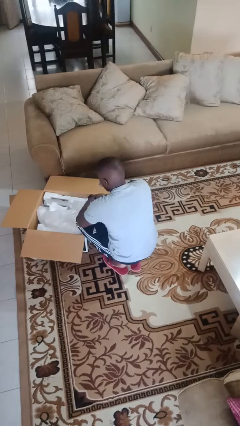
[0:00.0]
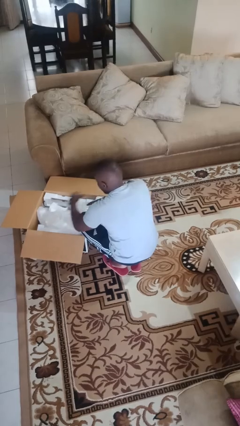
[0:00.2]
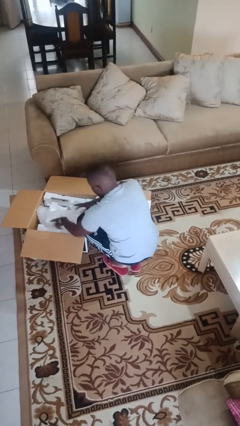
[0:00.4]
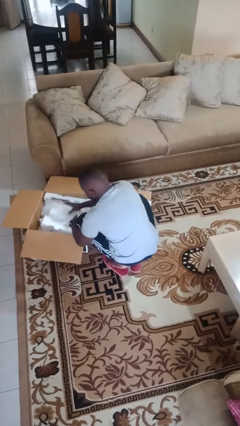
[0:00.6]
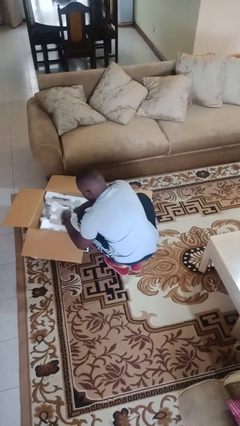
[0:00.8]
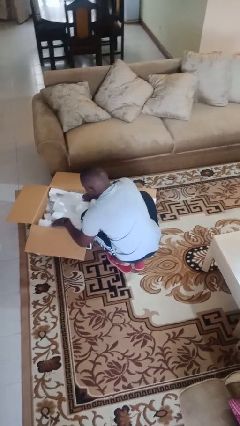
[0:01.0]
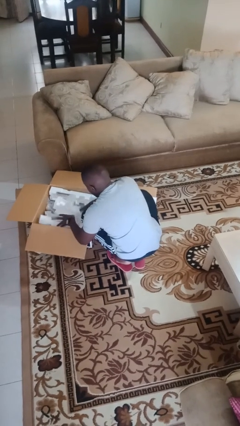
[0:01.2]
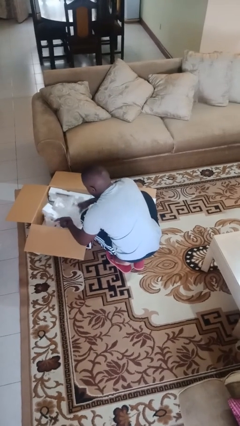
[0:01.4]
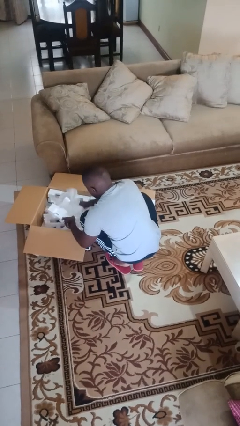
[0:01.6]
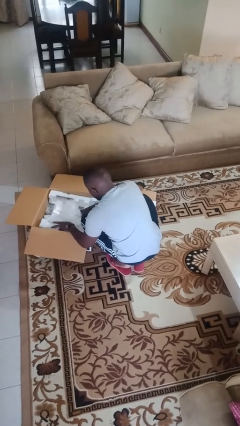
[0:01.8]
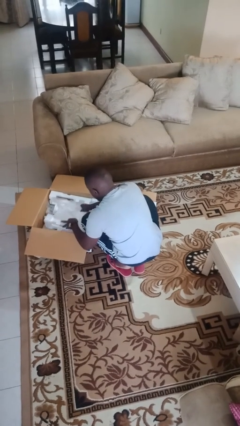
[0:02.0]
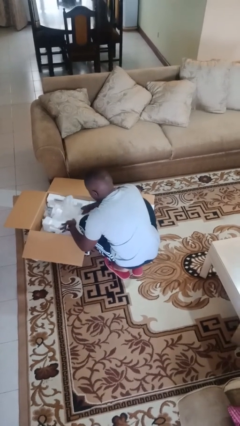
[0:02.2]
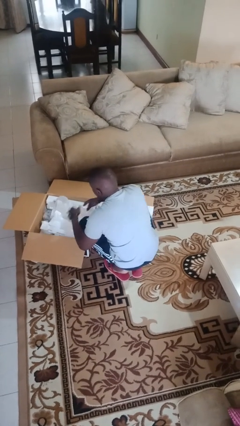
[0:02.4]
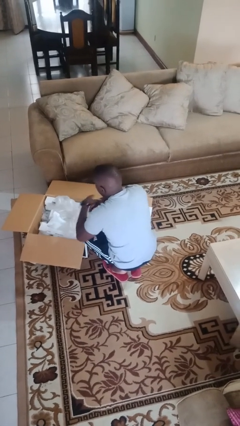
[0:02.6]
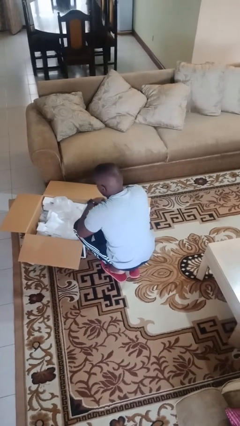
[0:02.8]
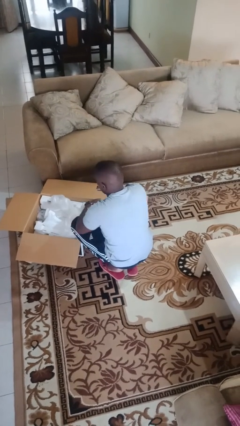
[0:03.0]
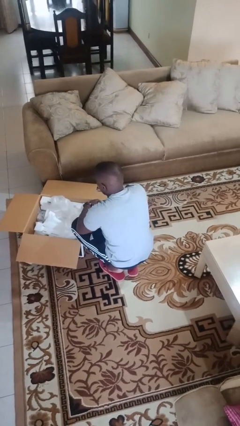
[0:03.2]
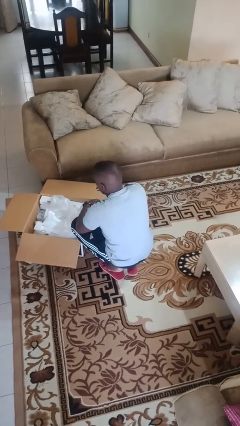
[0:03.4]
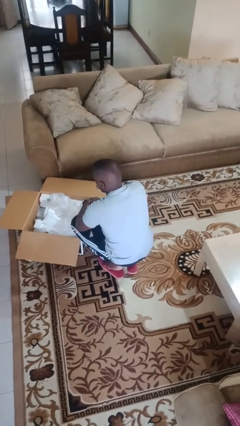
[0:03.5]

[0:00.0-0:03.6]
person searches in box

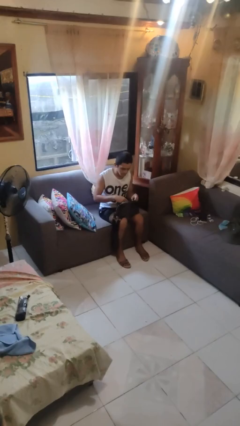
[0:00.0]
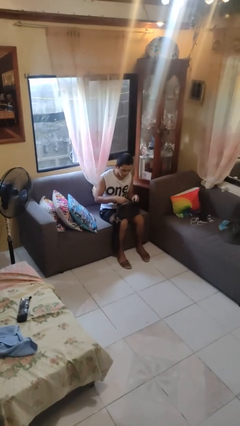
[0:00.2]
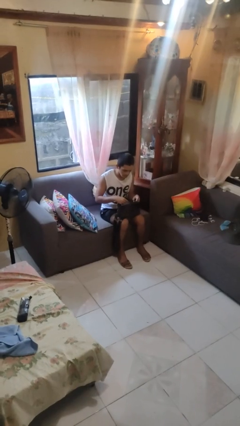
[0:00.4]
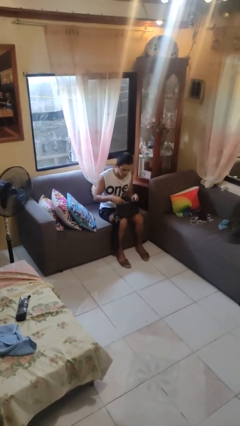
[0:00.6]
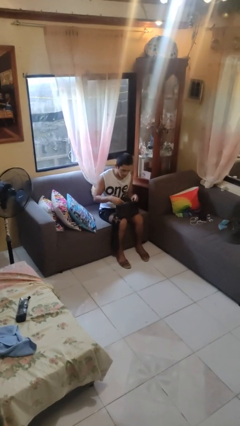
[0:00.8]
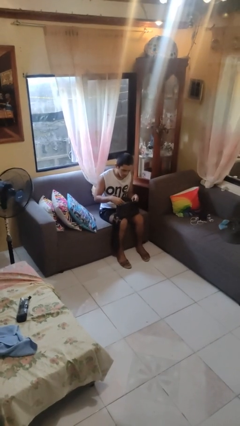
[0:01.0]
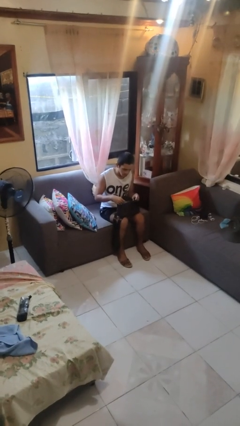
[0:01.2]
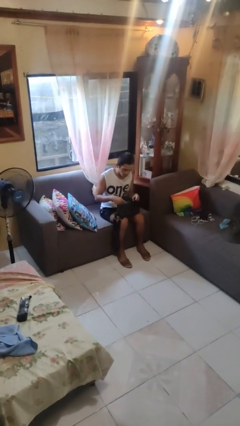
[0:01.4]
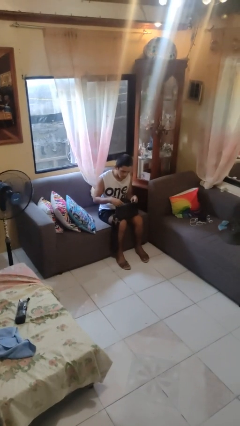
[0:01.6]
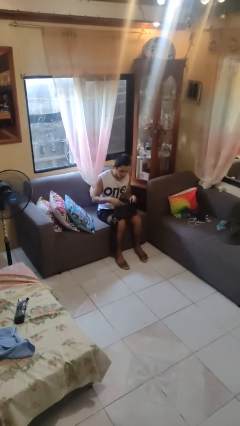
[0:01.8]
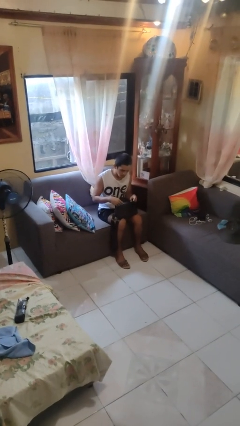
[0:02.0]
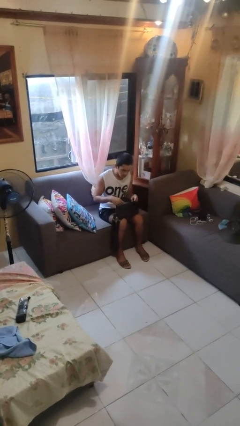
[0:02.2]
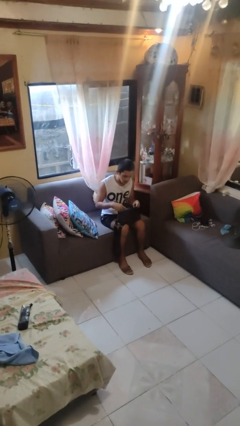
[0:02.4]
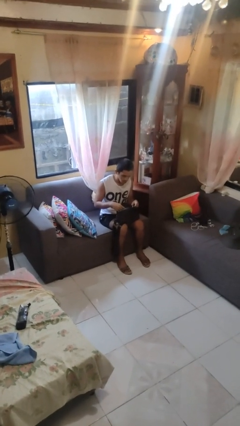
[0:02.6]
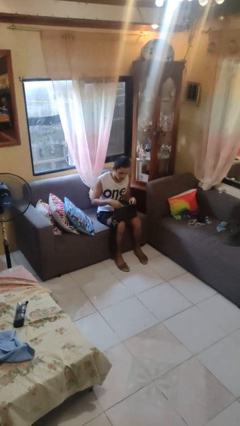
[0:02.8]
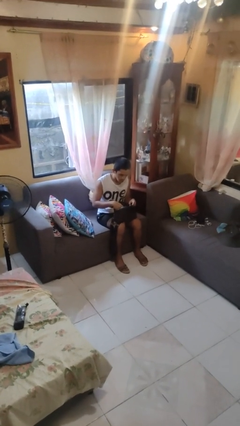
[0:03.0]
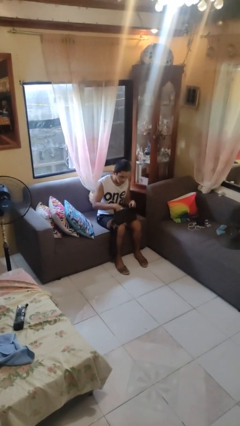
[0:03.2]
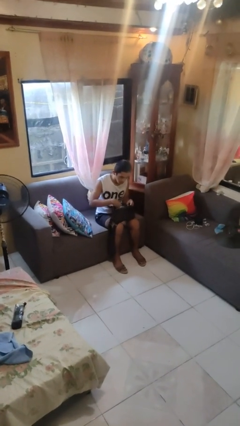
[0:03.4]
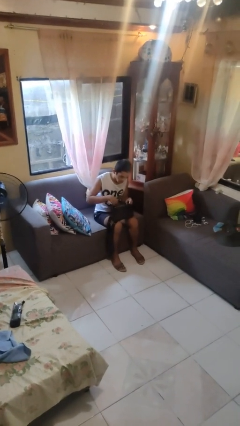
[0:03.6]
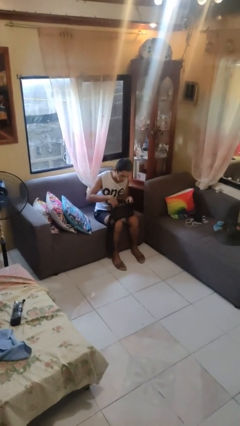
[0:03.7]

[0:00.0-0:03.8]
person puts object into purse

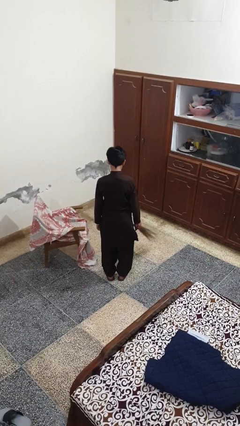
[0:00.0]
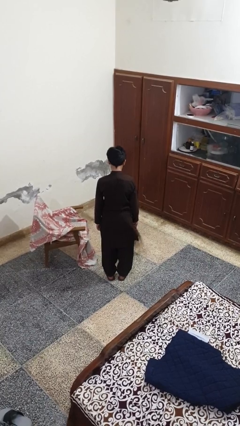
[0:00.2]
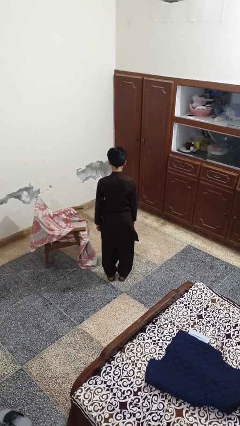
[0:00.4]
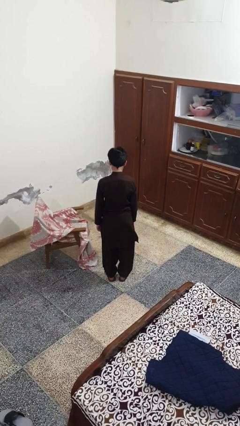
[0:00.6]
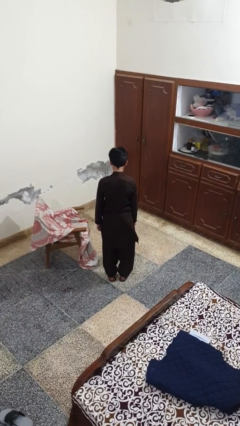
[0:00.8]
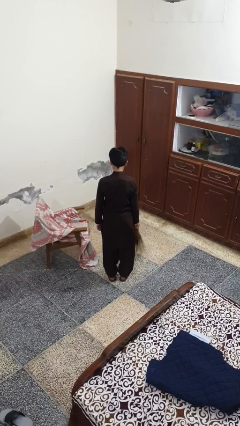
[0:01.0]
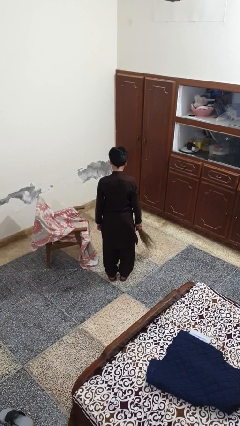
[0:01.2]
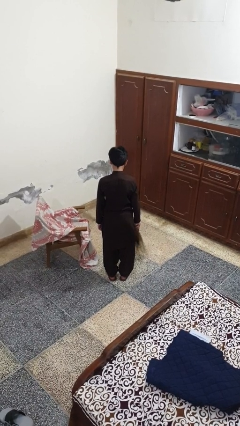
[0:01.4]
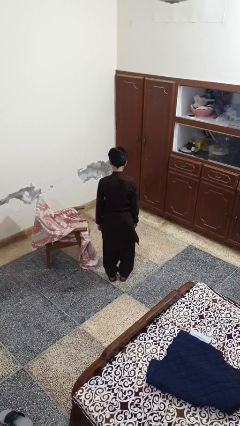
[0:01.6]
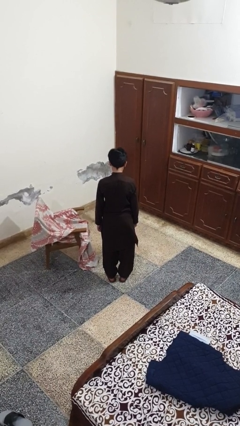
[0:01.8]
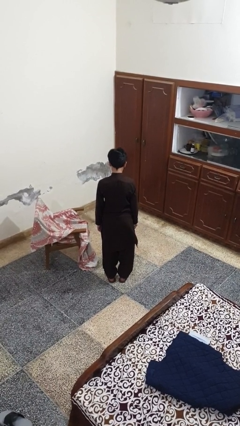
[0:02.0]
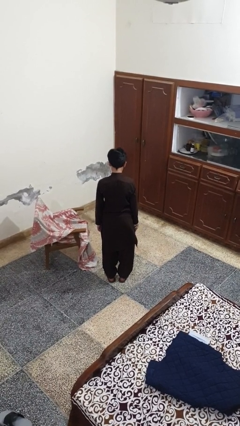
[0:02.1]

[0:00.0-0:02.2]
person sweeps floor

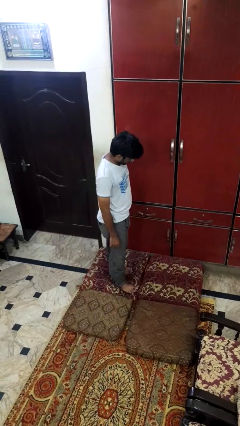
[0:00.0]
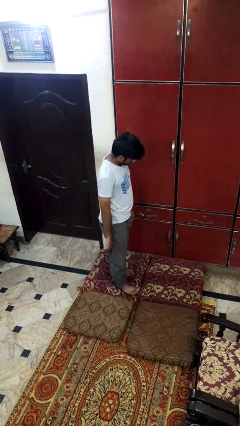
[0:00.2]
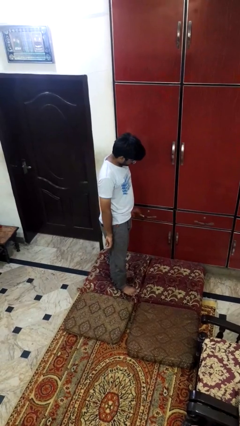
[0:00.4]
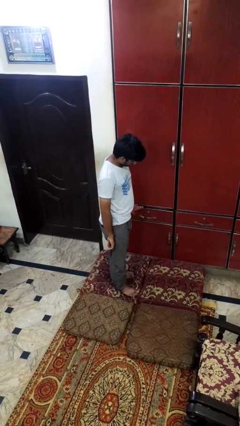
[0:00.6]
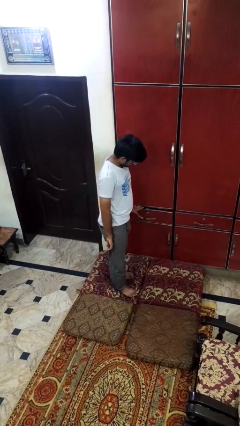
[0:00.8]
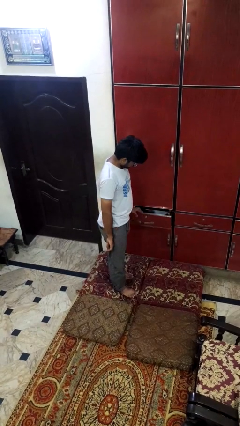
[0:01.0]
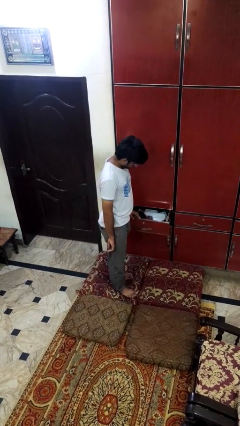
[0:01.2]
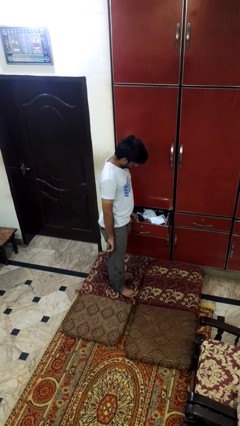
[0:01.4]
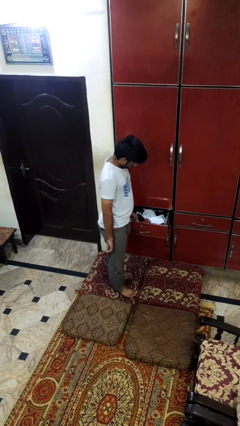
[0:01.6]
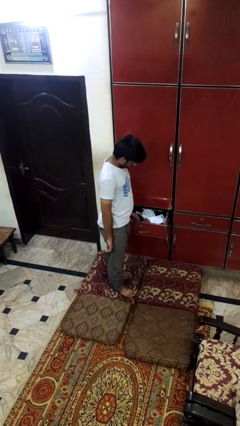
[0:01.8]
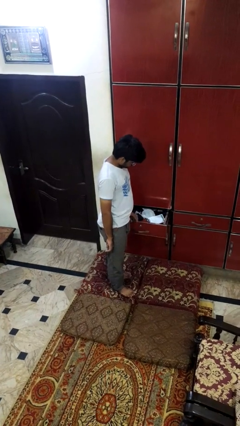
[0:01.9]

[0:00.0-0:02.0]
person opens dresser drawer

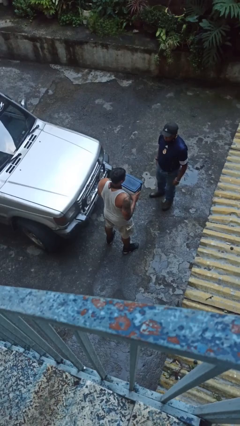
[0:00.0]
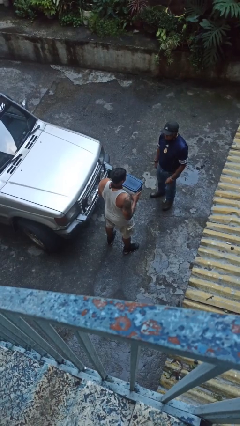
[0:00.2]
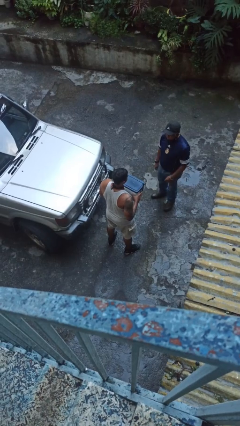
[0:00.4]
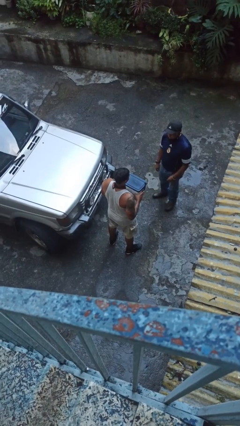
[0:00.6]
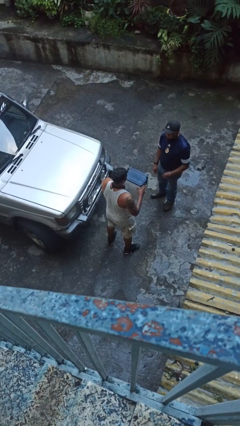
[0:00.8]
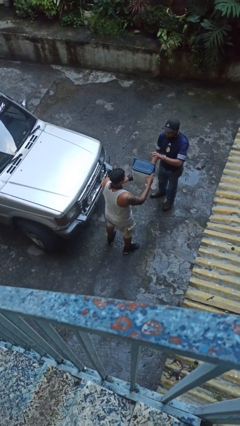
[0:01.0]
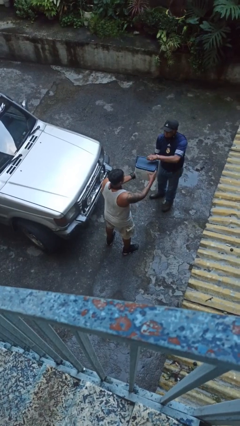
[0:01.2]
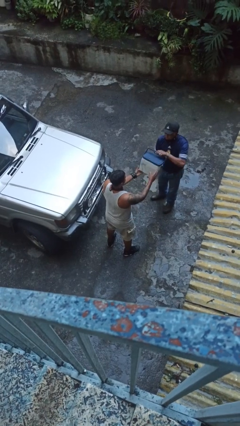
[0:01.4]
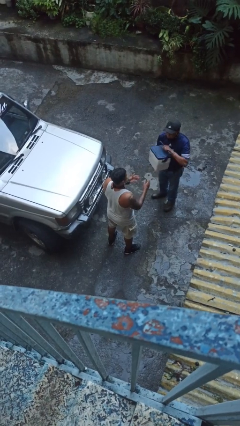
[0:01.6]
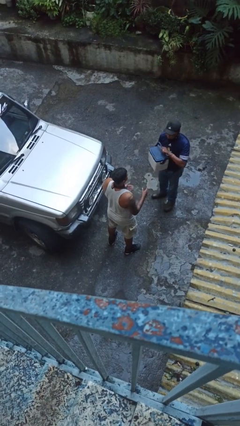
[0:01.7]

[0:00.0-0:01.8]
person transfers object to person

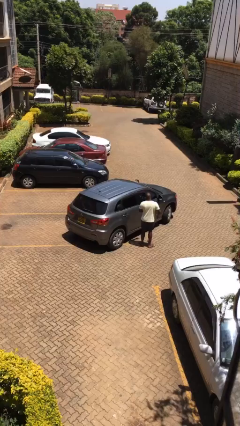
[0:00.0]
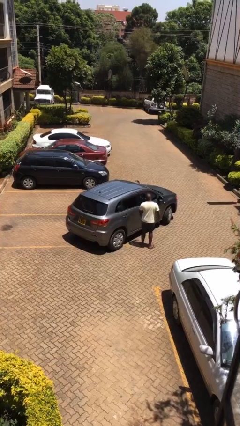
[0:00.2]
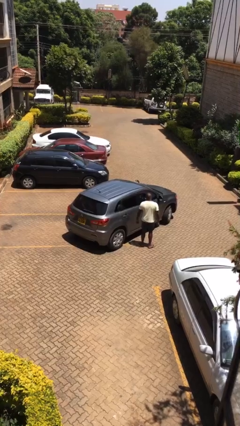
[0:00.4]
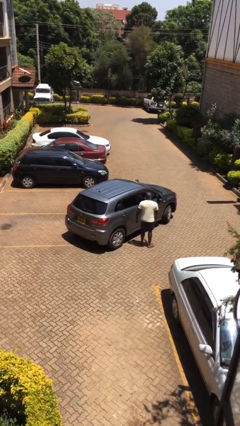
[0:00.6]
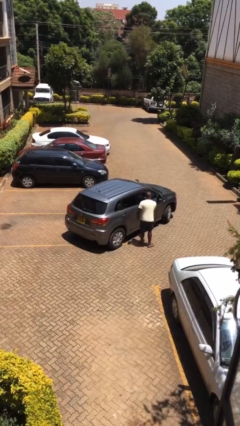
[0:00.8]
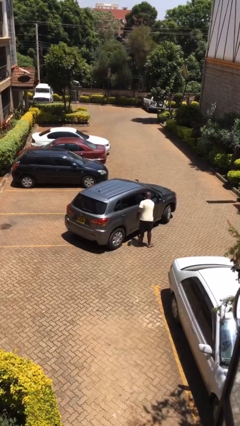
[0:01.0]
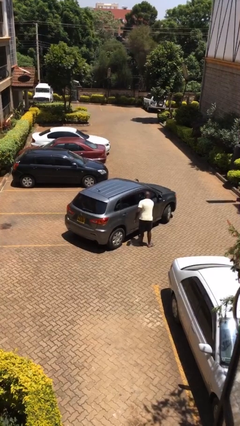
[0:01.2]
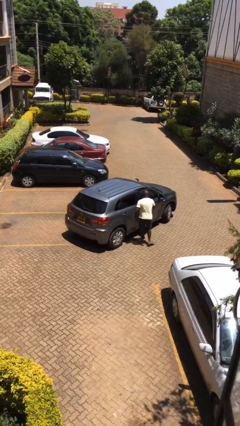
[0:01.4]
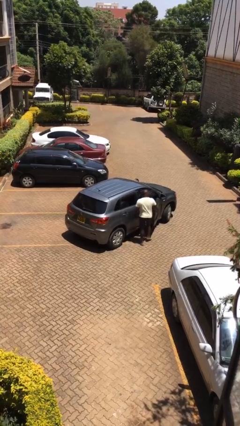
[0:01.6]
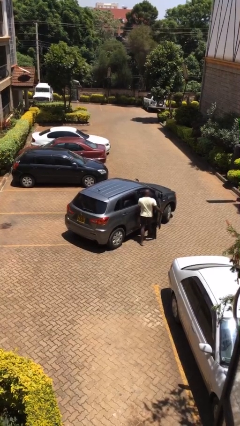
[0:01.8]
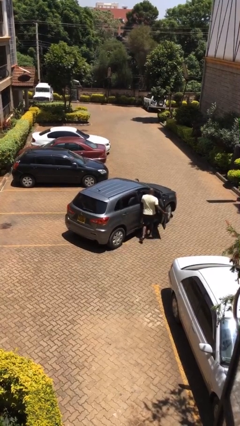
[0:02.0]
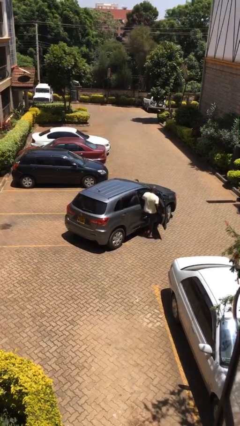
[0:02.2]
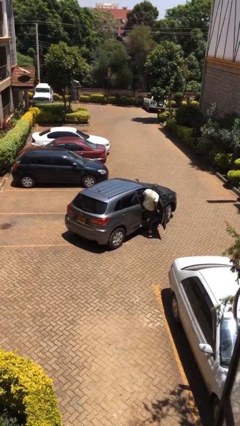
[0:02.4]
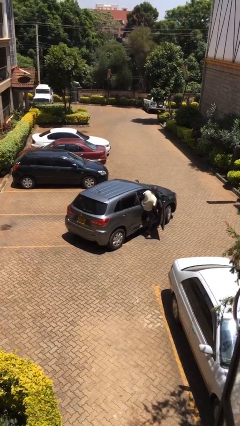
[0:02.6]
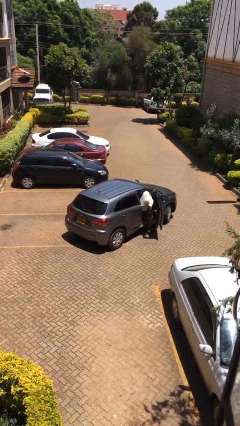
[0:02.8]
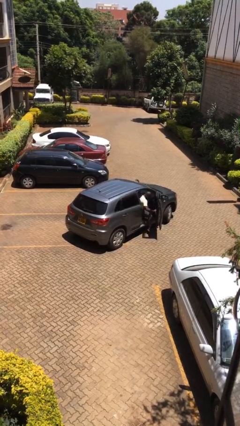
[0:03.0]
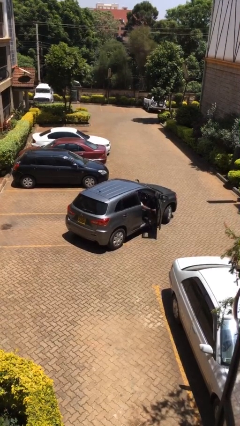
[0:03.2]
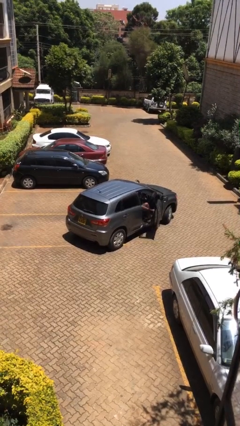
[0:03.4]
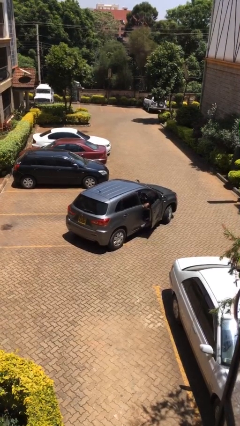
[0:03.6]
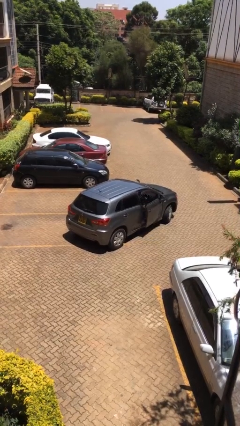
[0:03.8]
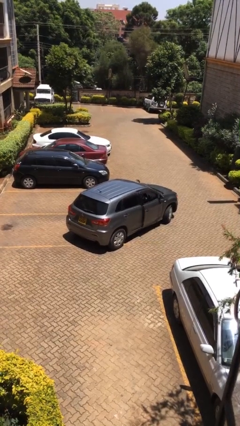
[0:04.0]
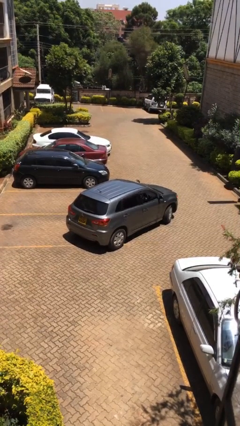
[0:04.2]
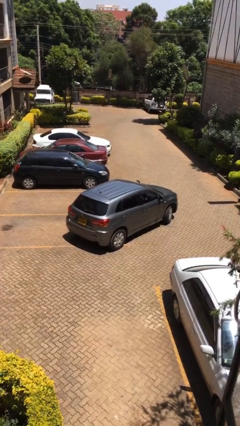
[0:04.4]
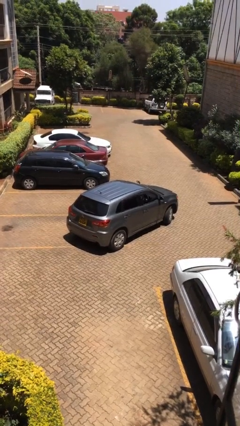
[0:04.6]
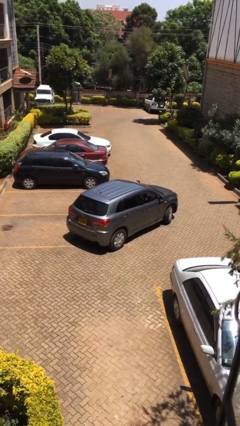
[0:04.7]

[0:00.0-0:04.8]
car picks up person
